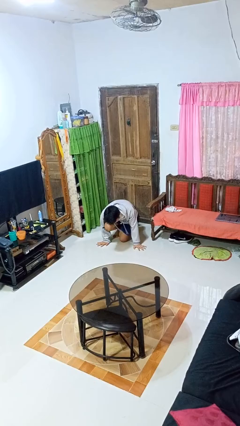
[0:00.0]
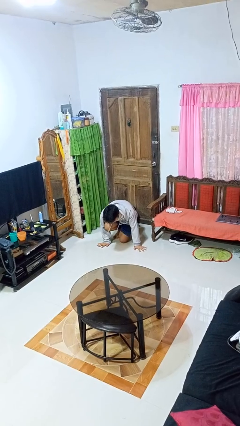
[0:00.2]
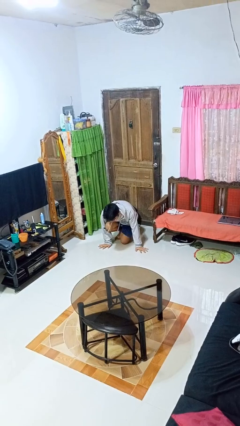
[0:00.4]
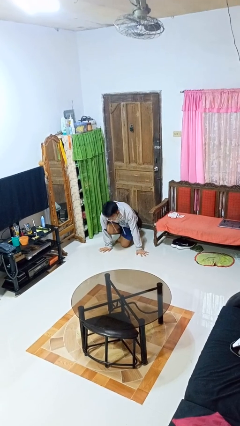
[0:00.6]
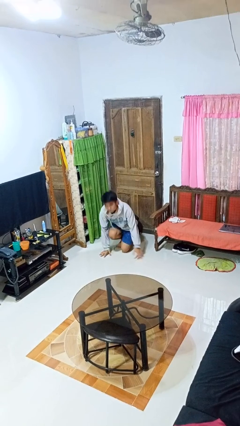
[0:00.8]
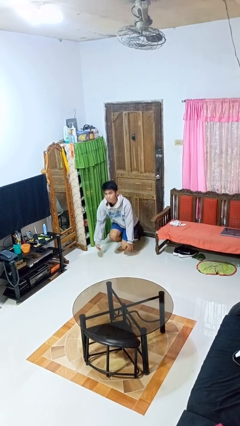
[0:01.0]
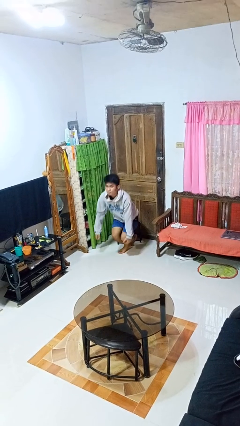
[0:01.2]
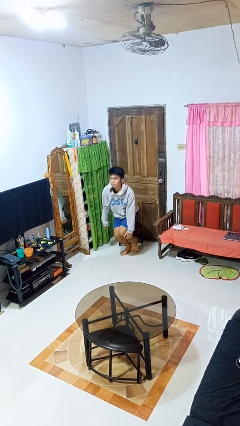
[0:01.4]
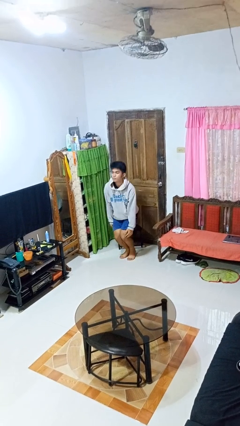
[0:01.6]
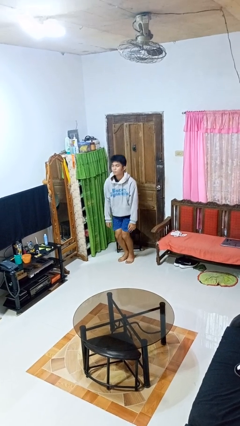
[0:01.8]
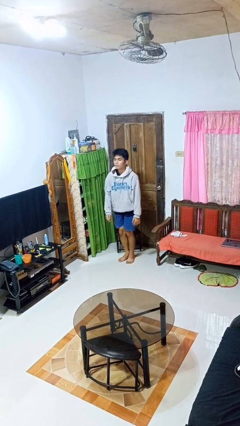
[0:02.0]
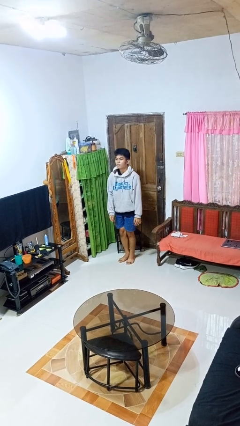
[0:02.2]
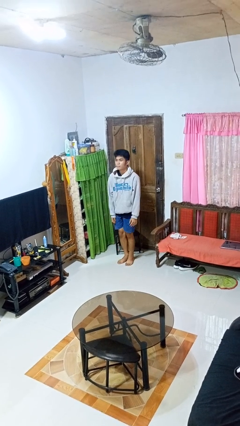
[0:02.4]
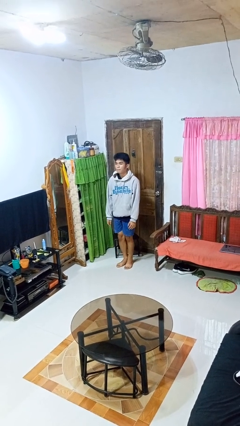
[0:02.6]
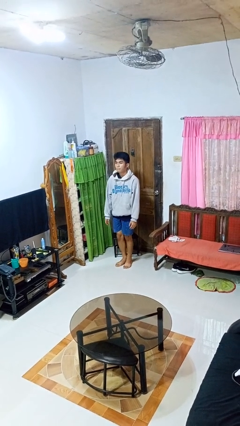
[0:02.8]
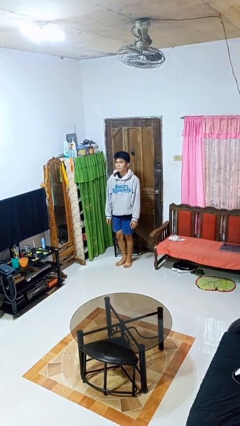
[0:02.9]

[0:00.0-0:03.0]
person stands up from floor

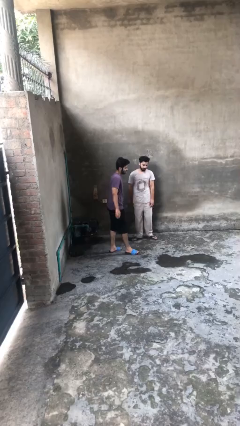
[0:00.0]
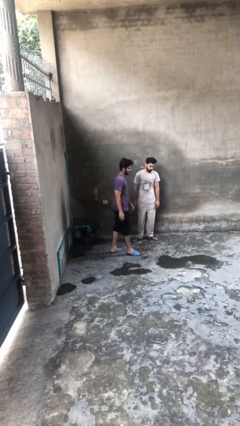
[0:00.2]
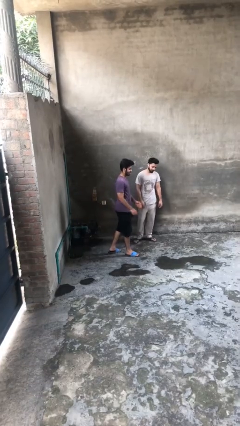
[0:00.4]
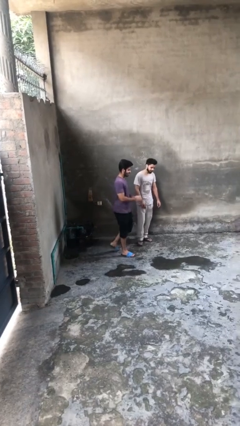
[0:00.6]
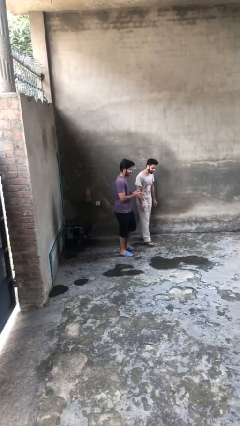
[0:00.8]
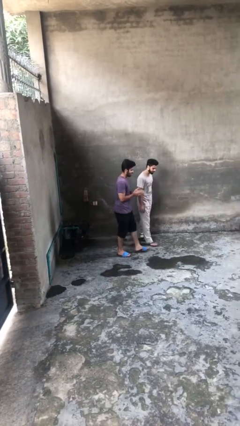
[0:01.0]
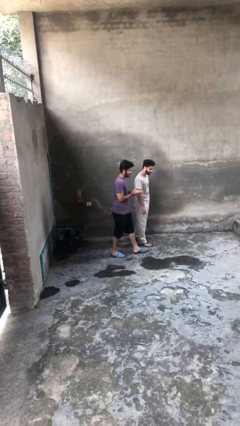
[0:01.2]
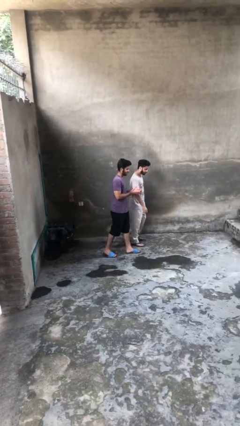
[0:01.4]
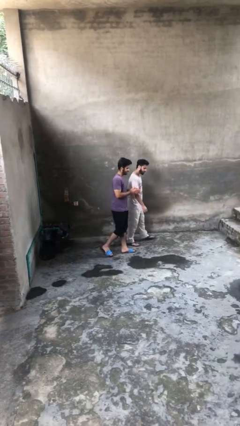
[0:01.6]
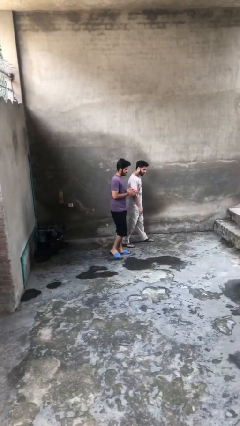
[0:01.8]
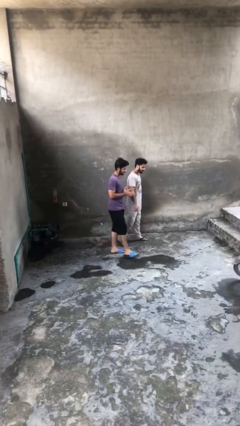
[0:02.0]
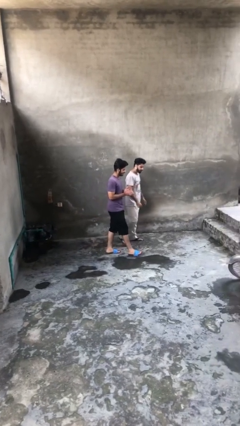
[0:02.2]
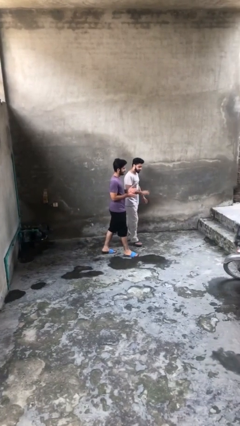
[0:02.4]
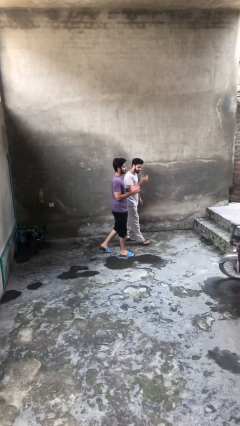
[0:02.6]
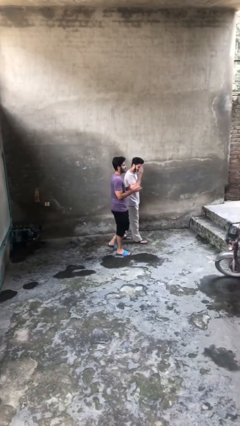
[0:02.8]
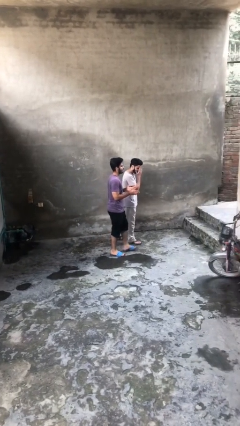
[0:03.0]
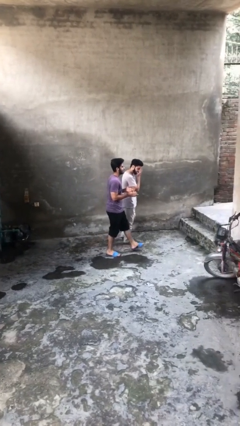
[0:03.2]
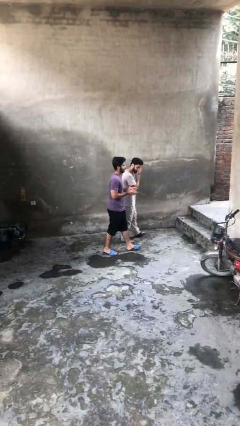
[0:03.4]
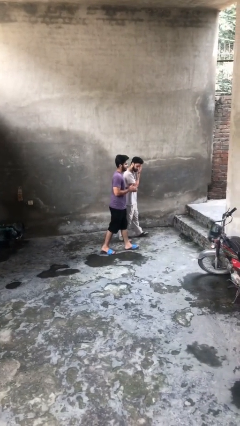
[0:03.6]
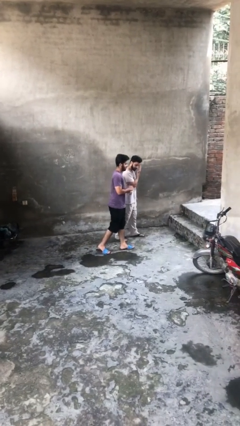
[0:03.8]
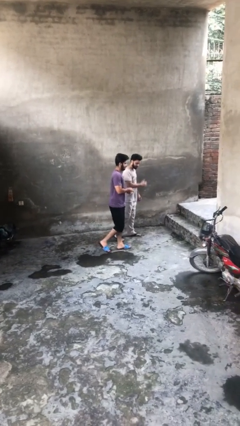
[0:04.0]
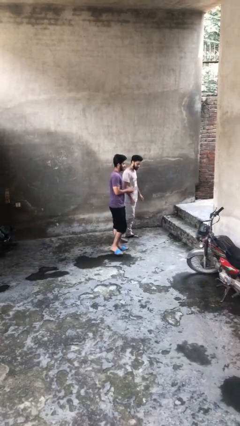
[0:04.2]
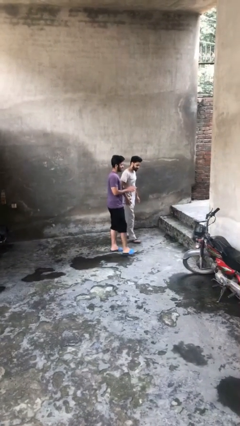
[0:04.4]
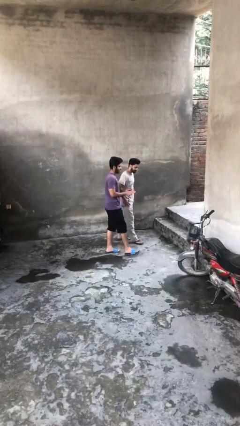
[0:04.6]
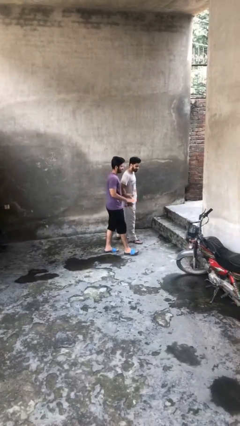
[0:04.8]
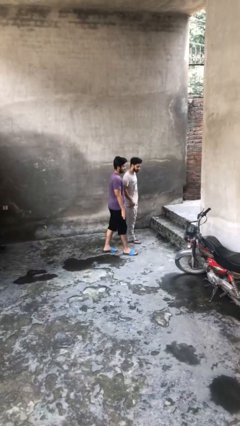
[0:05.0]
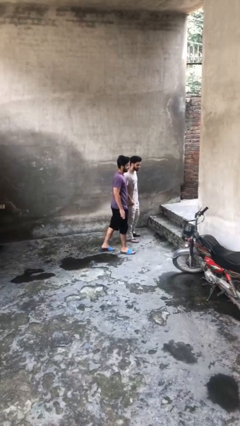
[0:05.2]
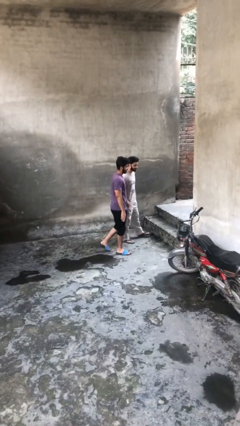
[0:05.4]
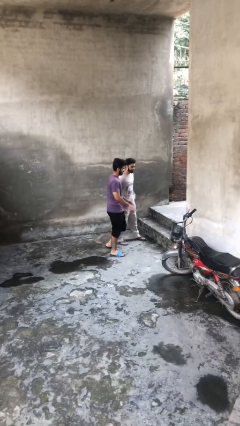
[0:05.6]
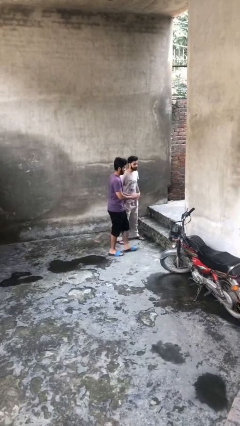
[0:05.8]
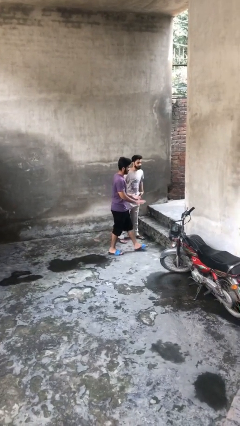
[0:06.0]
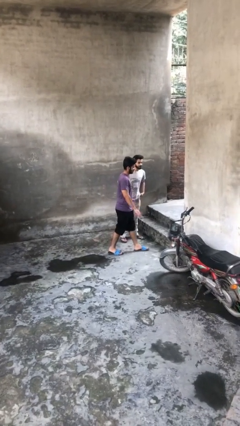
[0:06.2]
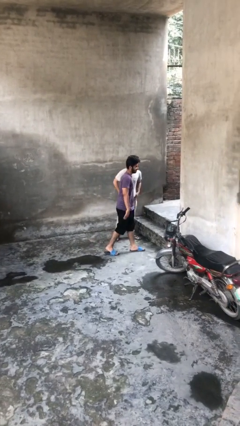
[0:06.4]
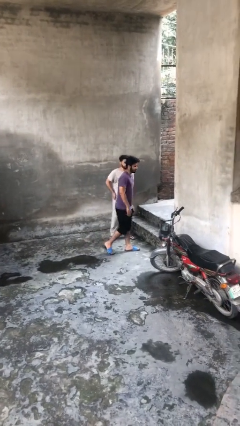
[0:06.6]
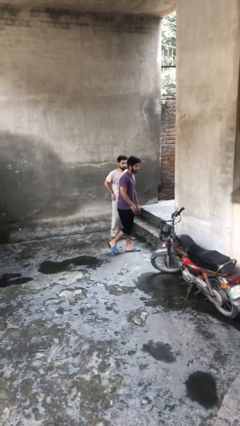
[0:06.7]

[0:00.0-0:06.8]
person talks to person

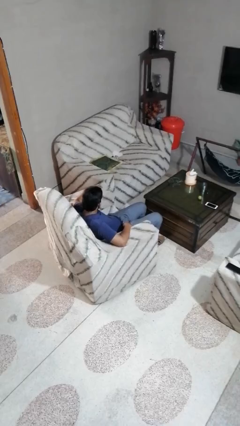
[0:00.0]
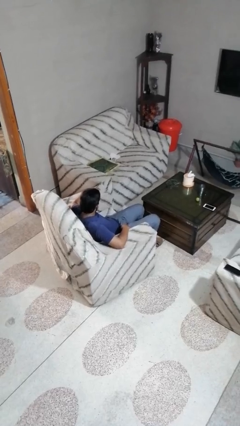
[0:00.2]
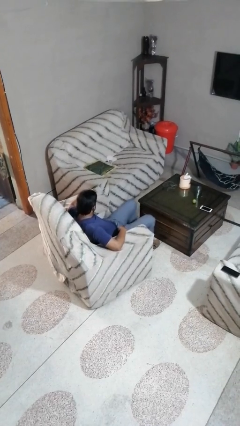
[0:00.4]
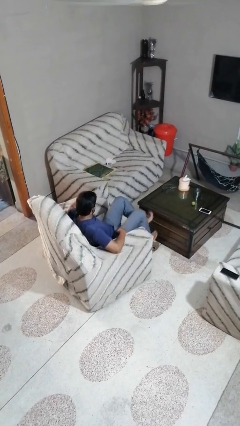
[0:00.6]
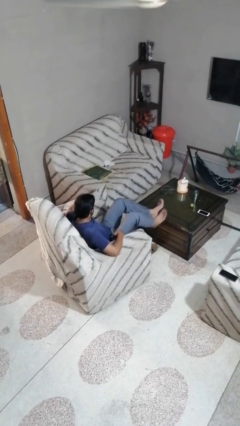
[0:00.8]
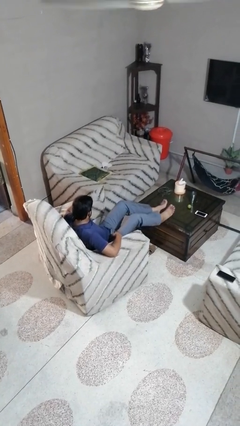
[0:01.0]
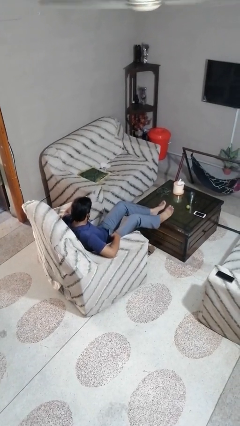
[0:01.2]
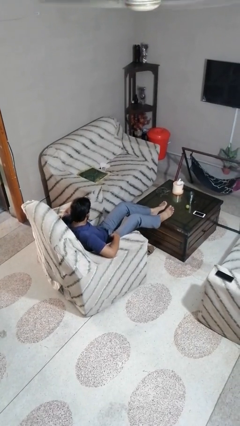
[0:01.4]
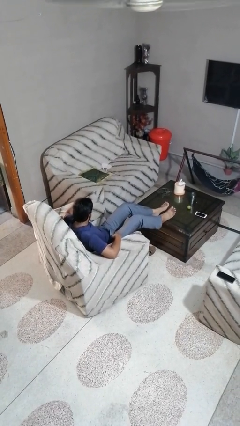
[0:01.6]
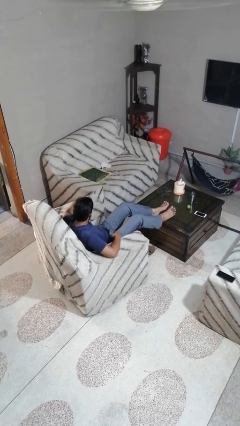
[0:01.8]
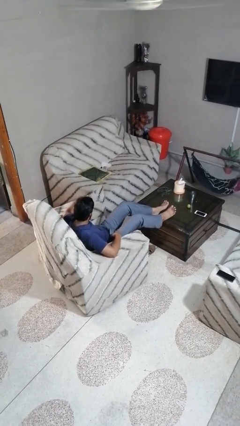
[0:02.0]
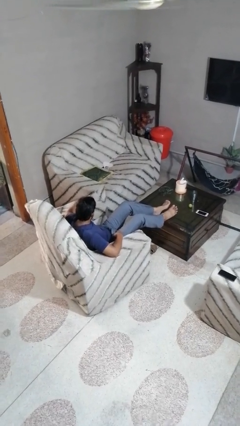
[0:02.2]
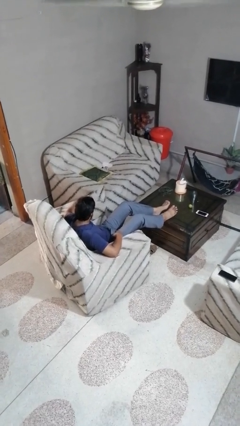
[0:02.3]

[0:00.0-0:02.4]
person puts feet up

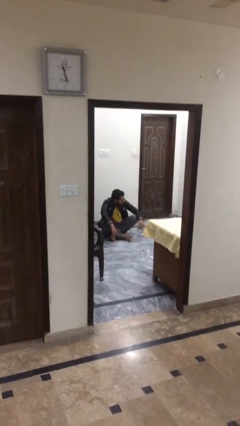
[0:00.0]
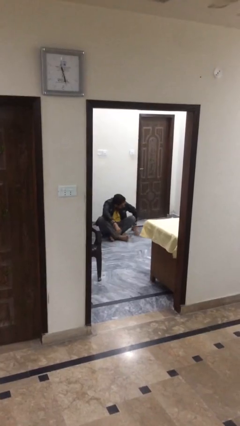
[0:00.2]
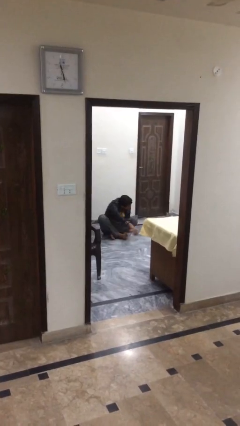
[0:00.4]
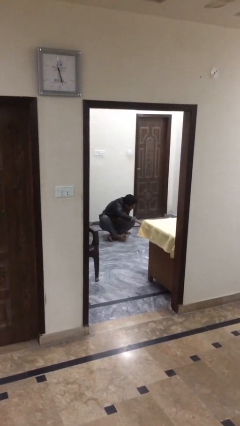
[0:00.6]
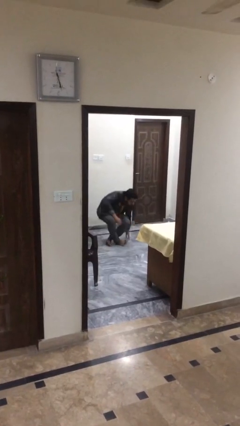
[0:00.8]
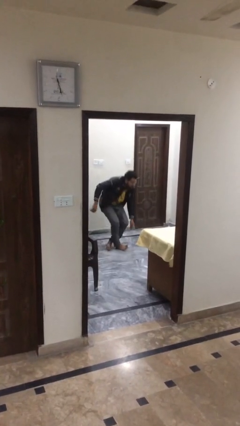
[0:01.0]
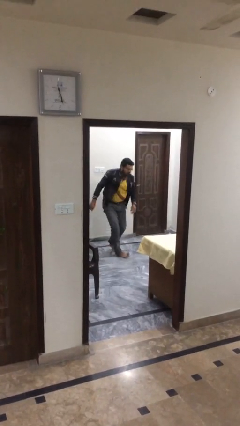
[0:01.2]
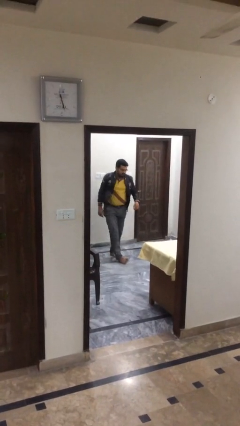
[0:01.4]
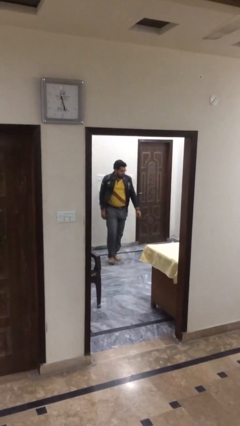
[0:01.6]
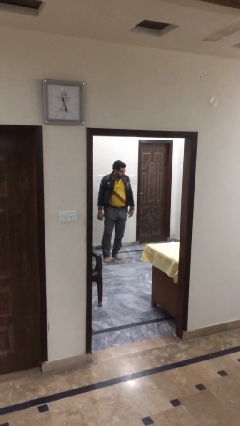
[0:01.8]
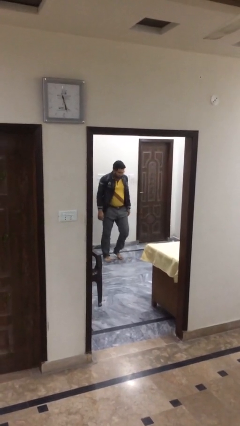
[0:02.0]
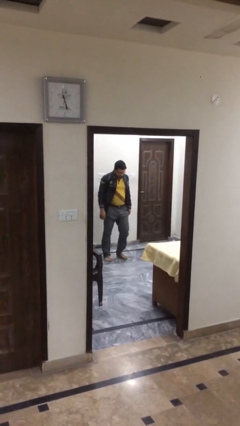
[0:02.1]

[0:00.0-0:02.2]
person stands up

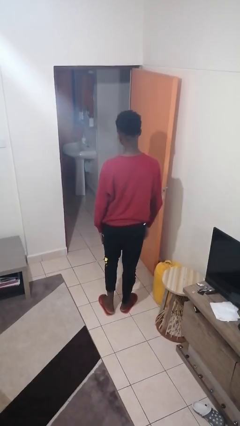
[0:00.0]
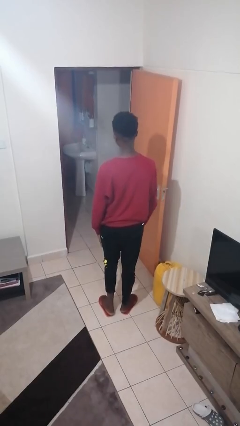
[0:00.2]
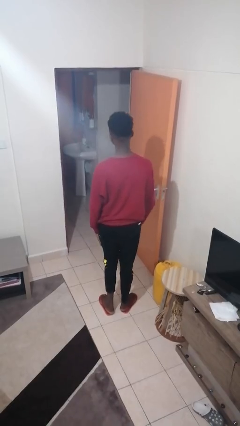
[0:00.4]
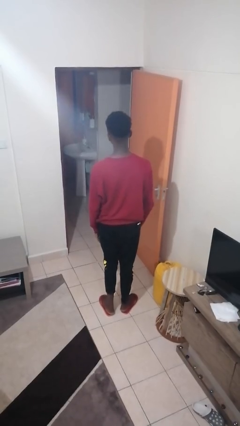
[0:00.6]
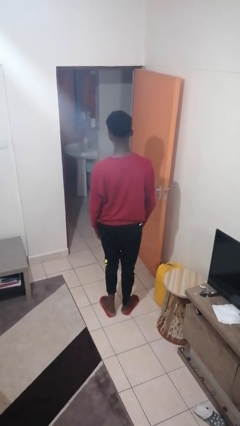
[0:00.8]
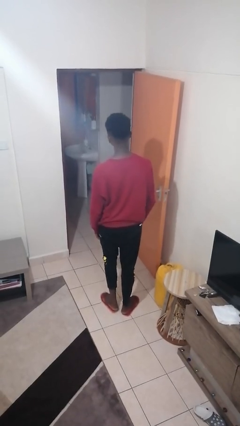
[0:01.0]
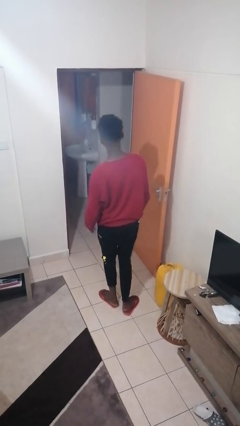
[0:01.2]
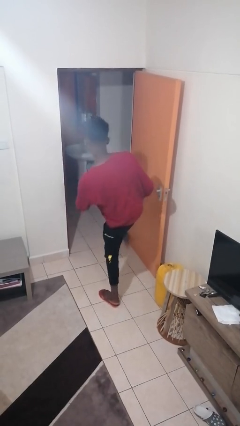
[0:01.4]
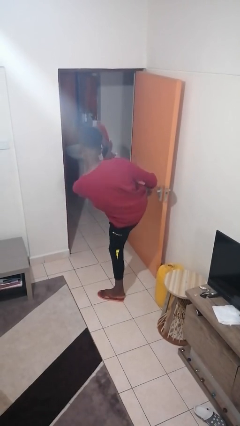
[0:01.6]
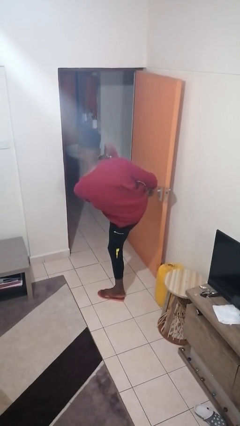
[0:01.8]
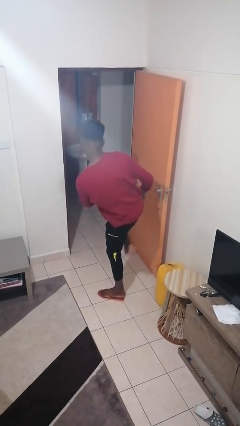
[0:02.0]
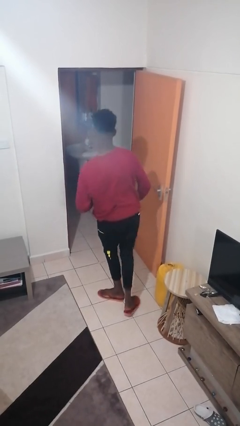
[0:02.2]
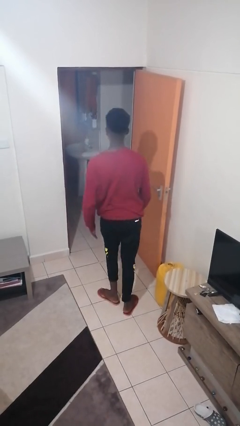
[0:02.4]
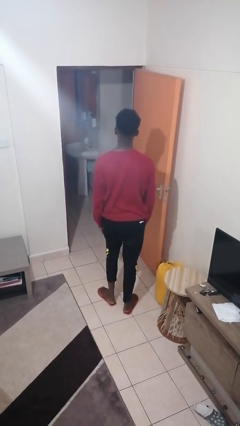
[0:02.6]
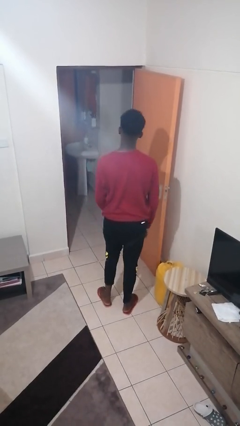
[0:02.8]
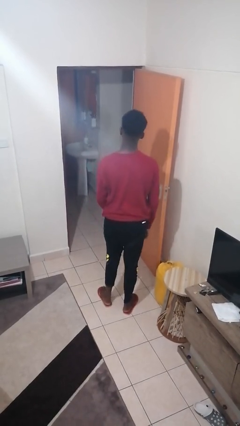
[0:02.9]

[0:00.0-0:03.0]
person karate kicks

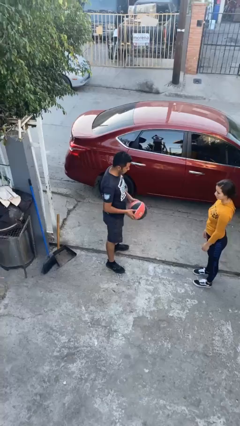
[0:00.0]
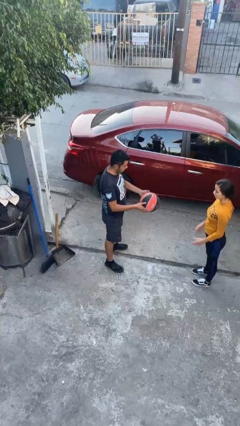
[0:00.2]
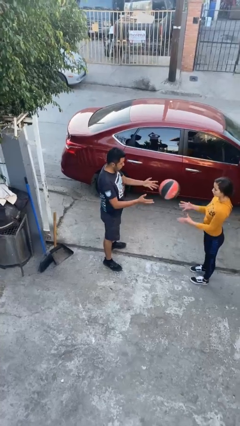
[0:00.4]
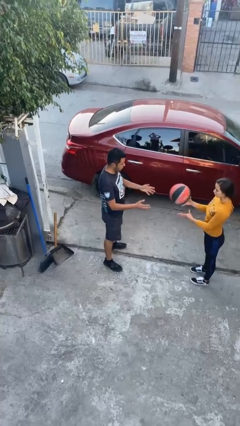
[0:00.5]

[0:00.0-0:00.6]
person throws object to person
